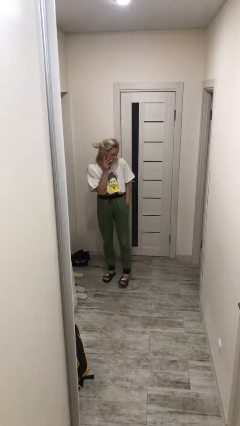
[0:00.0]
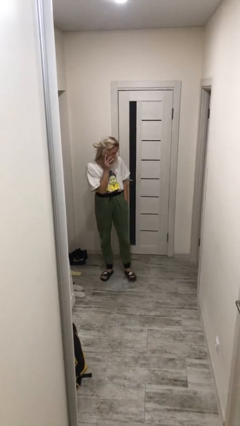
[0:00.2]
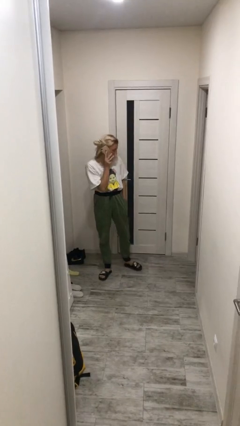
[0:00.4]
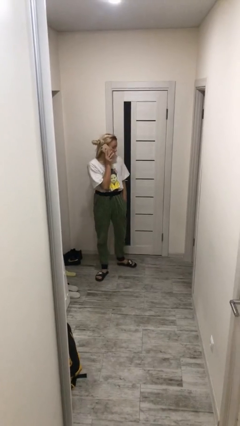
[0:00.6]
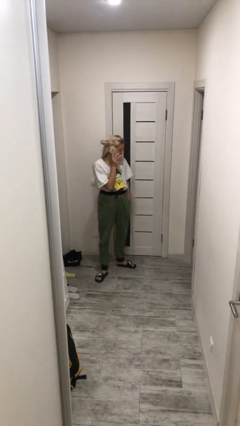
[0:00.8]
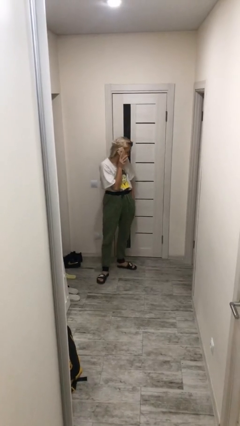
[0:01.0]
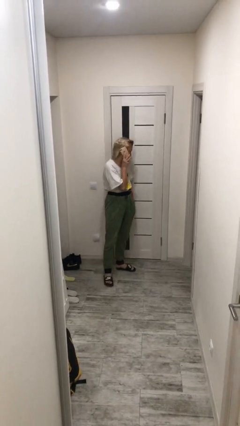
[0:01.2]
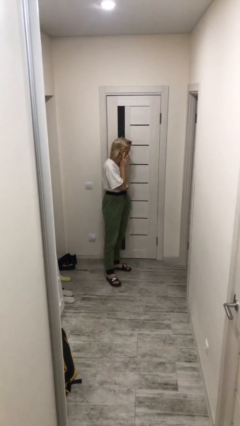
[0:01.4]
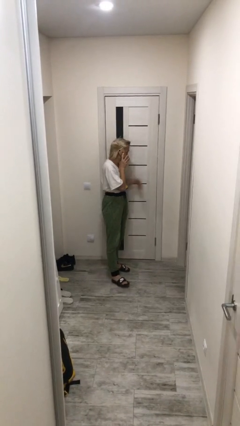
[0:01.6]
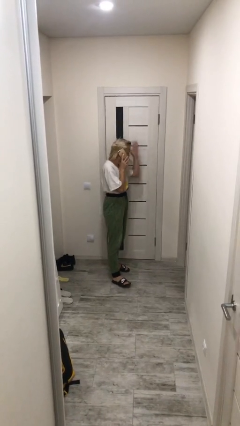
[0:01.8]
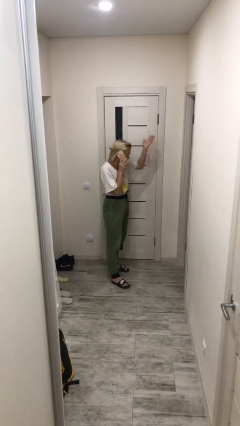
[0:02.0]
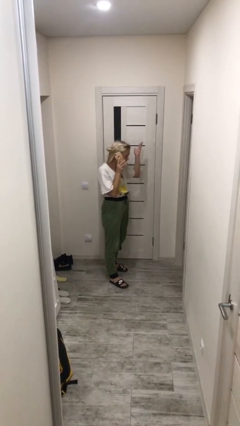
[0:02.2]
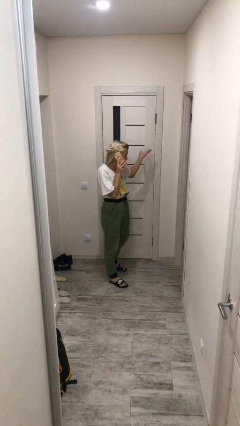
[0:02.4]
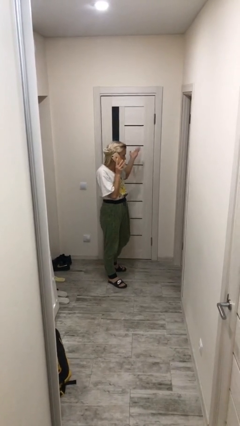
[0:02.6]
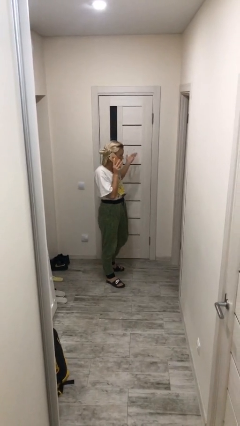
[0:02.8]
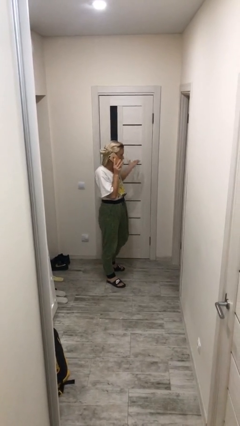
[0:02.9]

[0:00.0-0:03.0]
person talks on phone

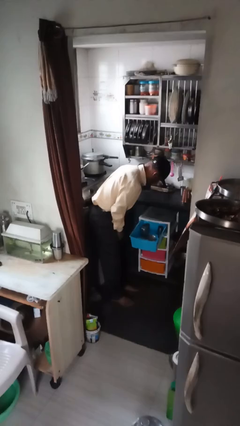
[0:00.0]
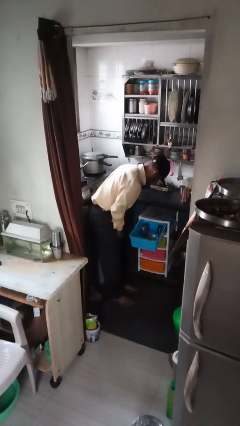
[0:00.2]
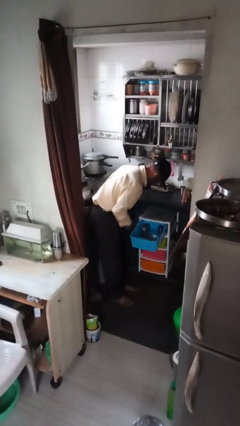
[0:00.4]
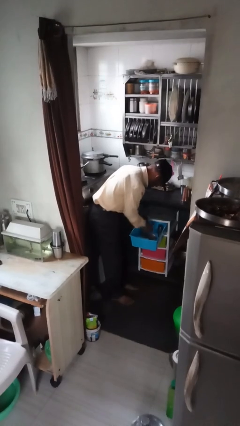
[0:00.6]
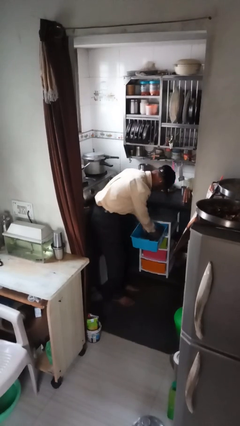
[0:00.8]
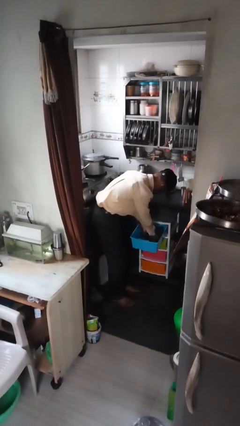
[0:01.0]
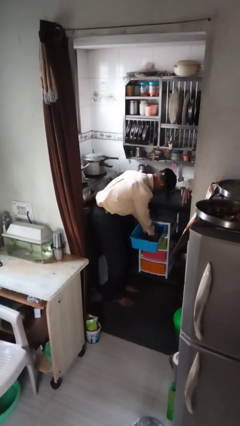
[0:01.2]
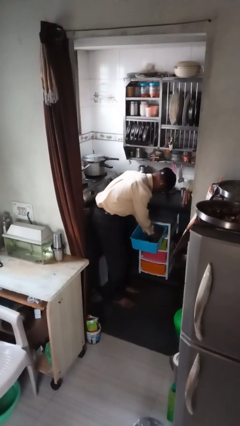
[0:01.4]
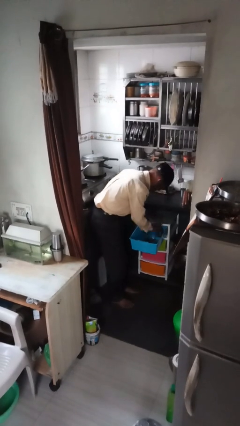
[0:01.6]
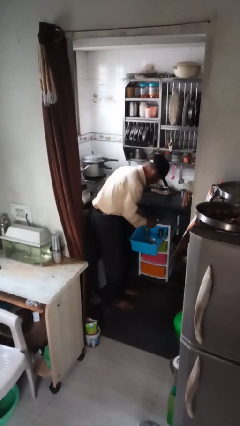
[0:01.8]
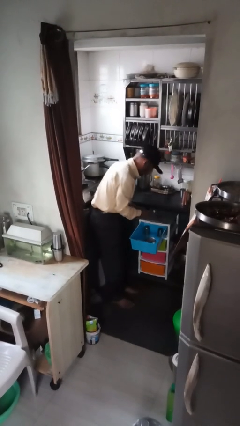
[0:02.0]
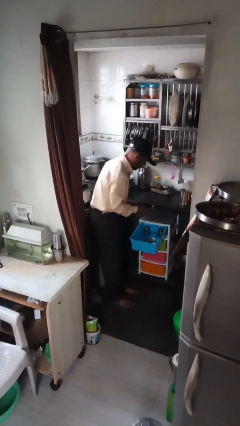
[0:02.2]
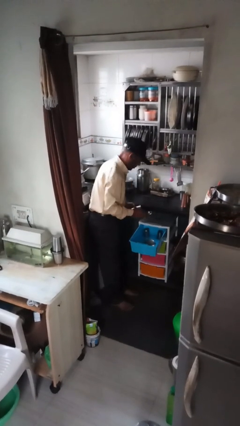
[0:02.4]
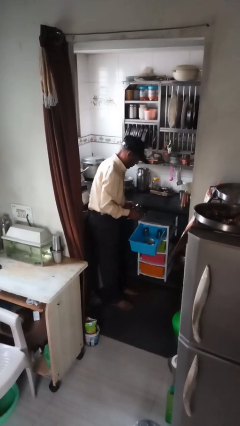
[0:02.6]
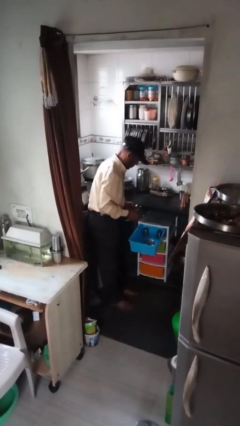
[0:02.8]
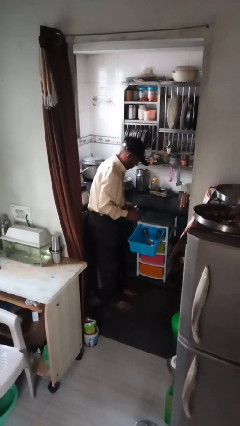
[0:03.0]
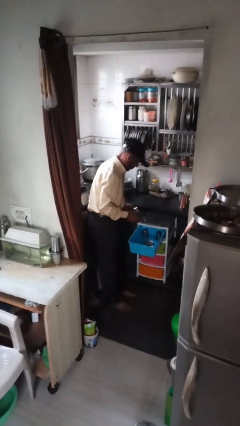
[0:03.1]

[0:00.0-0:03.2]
person takes object from kitchen drawer

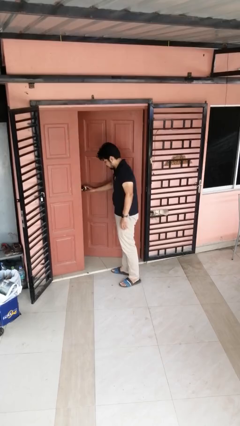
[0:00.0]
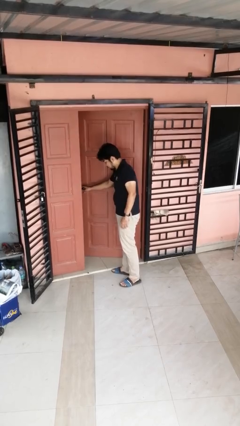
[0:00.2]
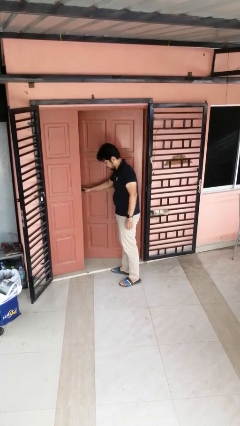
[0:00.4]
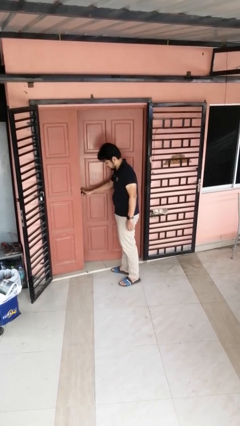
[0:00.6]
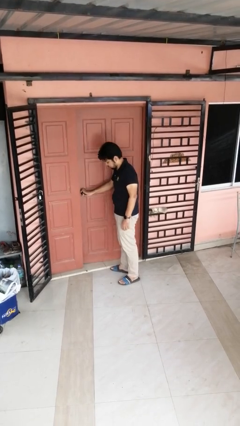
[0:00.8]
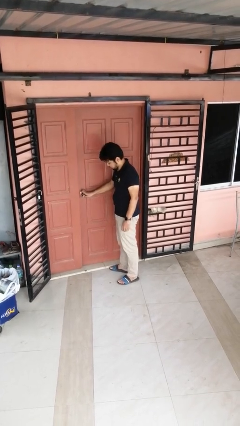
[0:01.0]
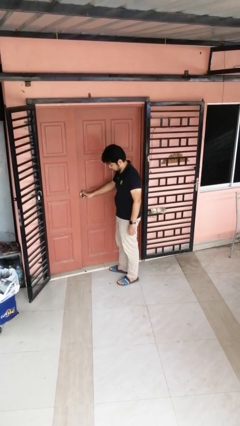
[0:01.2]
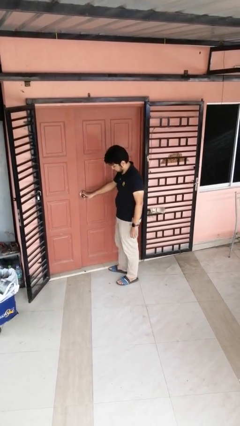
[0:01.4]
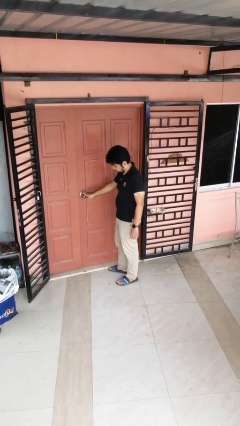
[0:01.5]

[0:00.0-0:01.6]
person closes door with foot

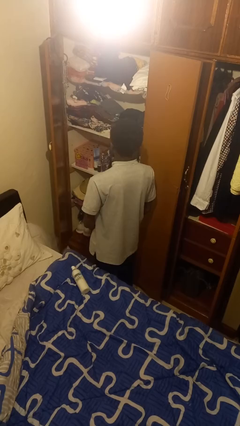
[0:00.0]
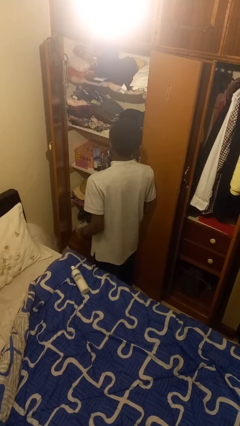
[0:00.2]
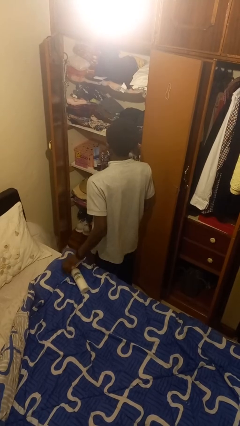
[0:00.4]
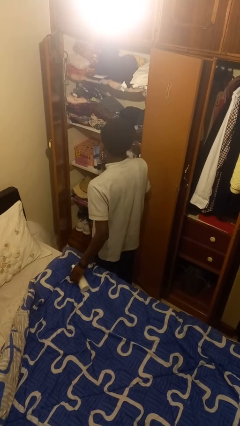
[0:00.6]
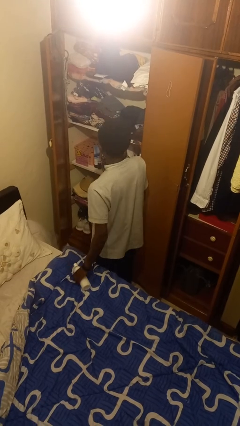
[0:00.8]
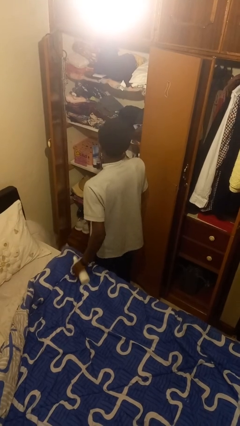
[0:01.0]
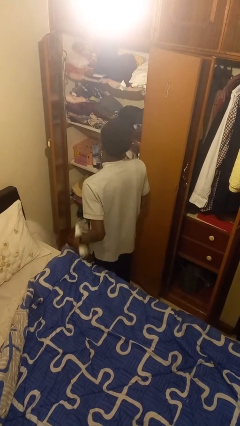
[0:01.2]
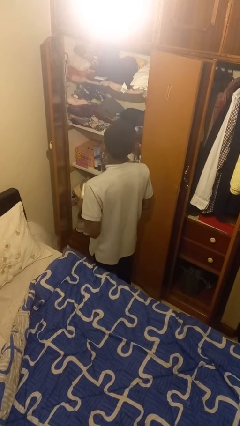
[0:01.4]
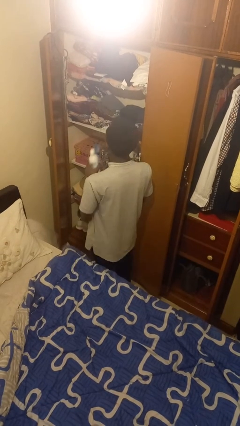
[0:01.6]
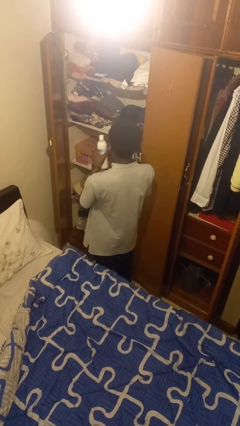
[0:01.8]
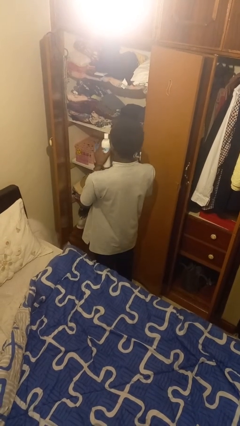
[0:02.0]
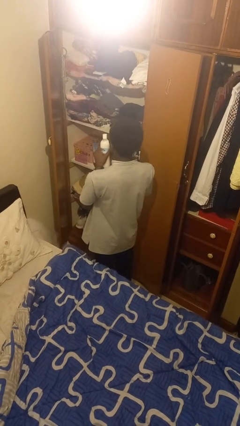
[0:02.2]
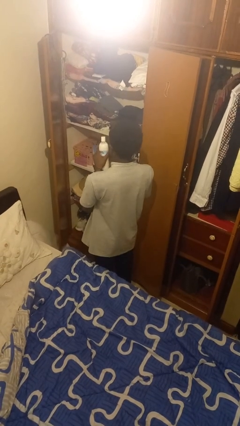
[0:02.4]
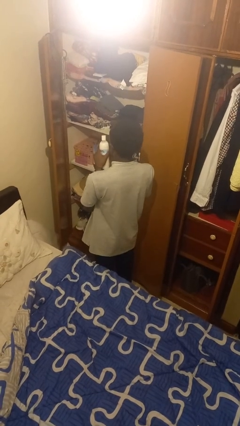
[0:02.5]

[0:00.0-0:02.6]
person picks up object from bed

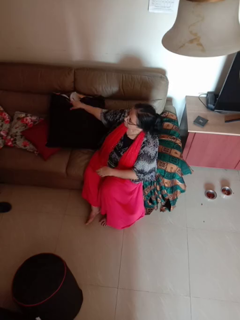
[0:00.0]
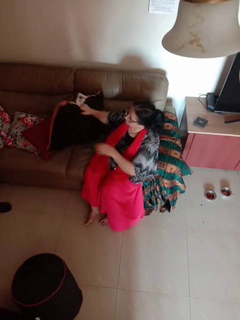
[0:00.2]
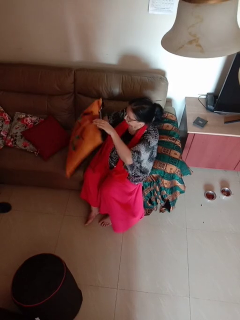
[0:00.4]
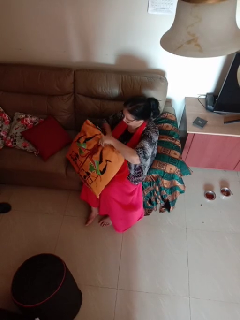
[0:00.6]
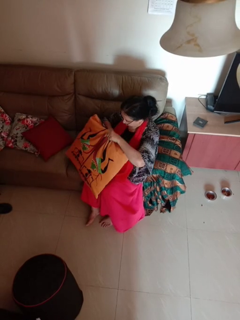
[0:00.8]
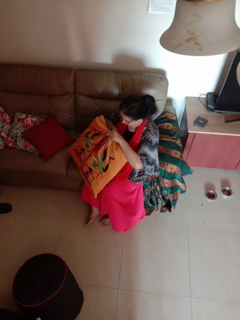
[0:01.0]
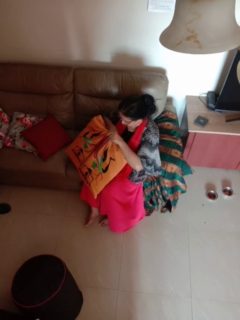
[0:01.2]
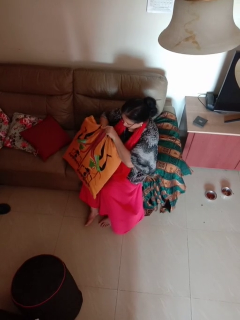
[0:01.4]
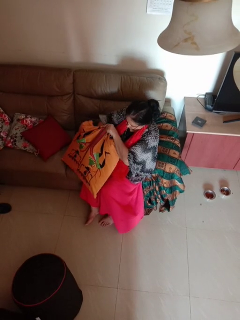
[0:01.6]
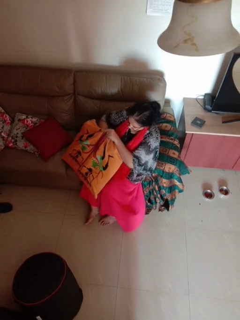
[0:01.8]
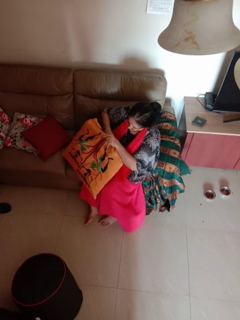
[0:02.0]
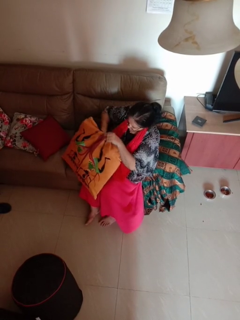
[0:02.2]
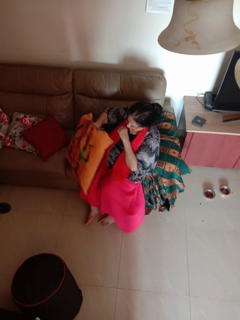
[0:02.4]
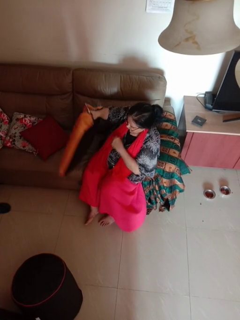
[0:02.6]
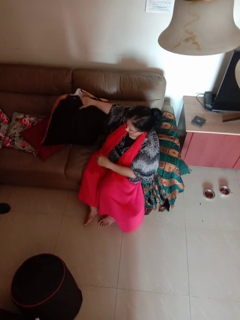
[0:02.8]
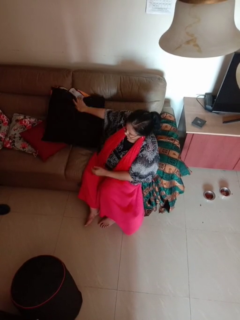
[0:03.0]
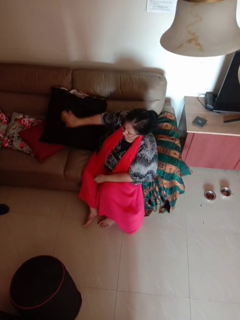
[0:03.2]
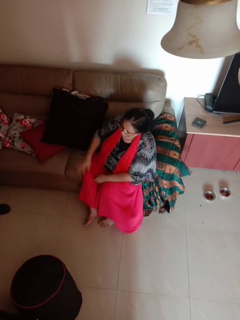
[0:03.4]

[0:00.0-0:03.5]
person searches in couch

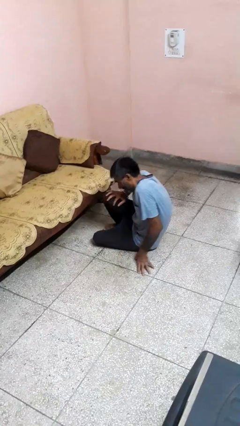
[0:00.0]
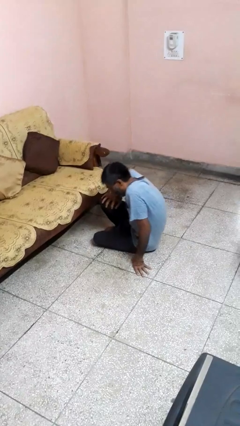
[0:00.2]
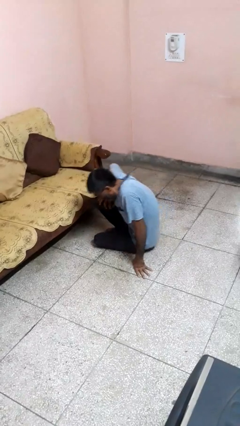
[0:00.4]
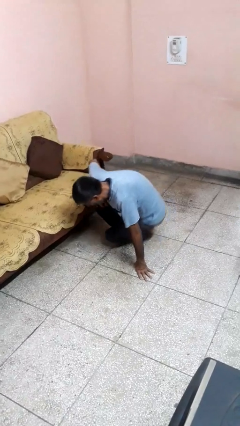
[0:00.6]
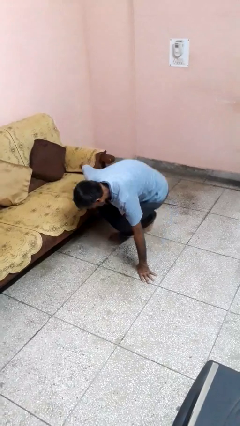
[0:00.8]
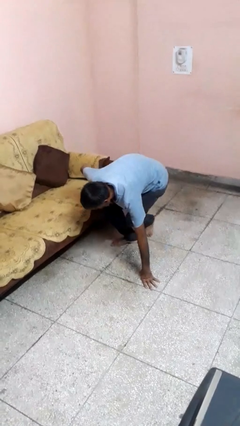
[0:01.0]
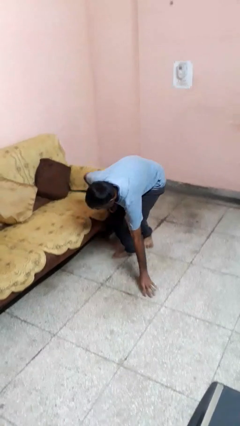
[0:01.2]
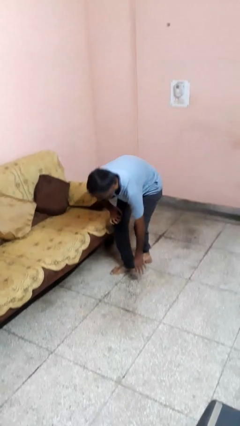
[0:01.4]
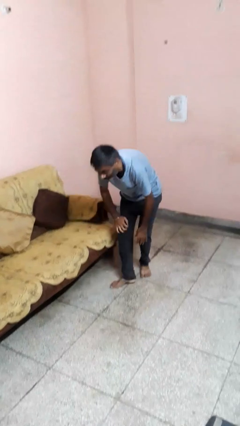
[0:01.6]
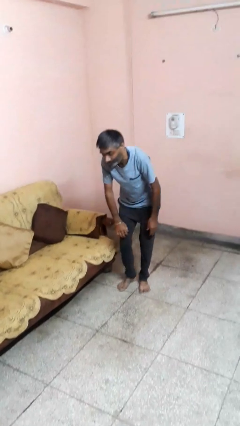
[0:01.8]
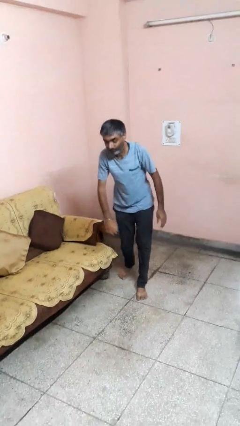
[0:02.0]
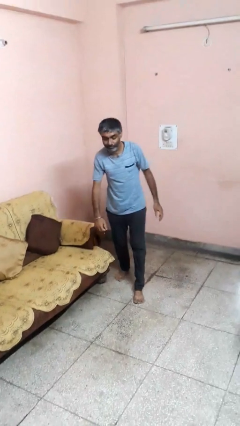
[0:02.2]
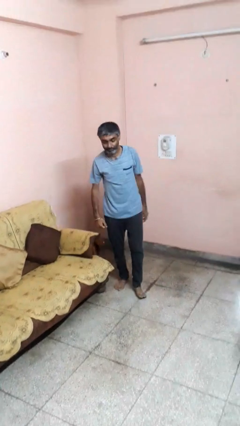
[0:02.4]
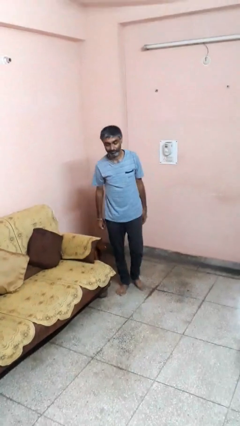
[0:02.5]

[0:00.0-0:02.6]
person stands up from floor

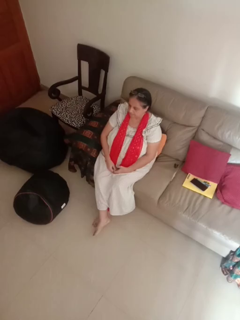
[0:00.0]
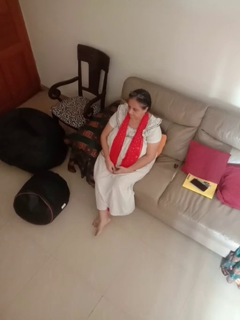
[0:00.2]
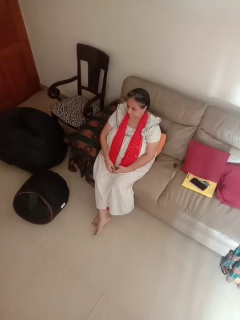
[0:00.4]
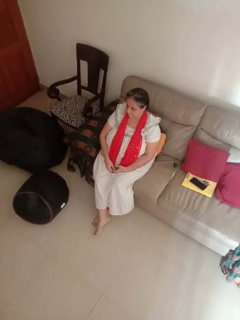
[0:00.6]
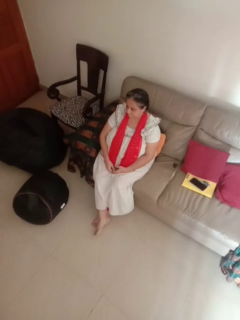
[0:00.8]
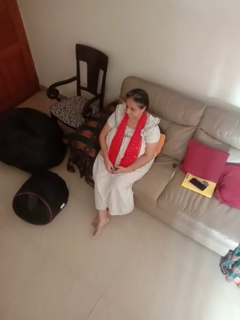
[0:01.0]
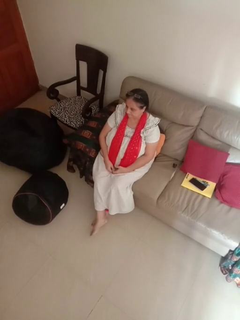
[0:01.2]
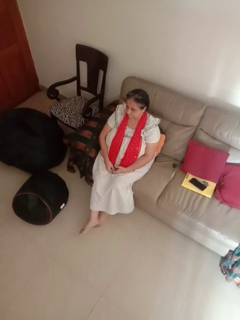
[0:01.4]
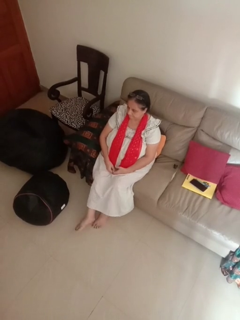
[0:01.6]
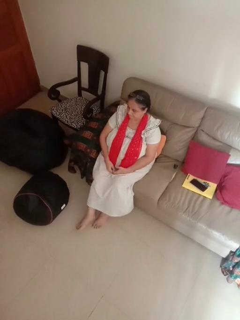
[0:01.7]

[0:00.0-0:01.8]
person crosses legs
